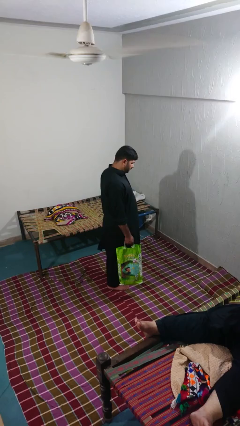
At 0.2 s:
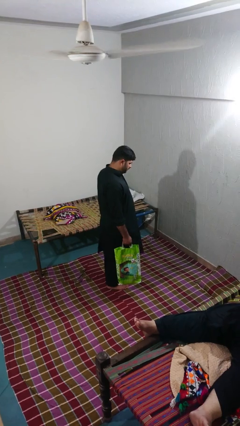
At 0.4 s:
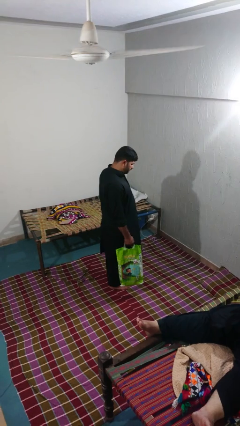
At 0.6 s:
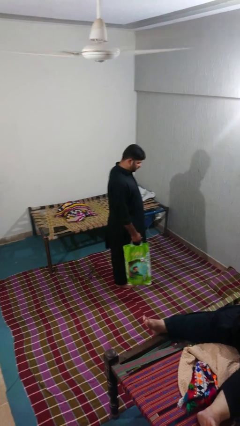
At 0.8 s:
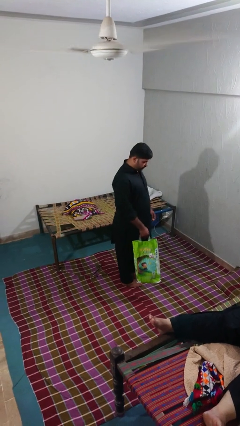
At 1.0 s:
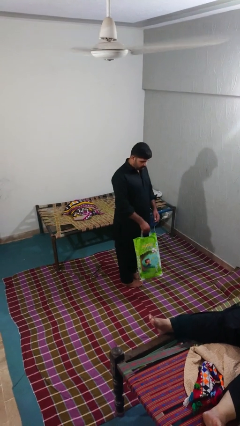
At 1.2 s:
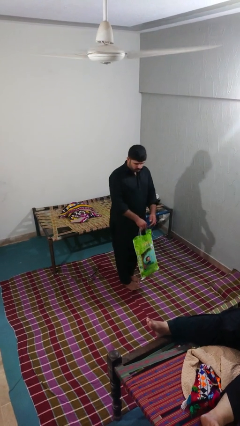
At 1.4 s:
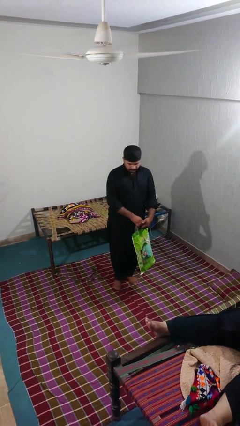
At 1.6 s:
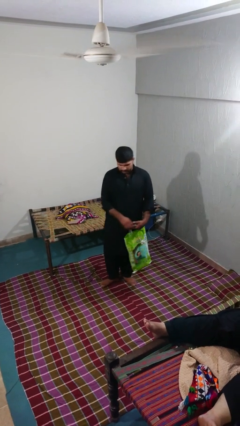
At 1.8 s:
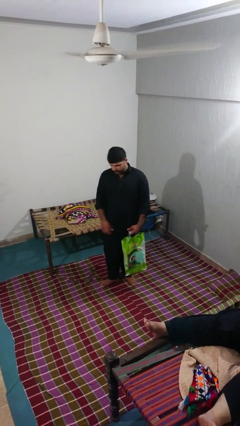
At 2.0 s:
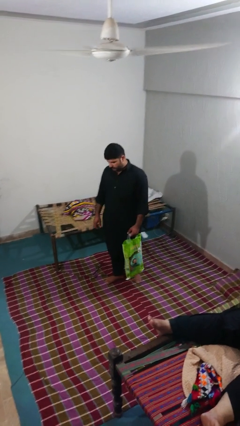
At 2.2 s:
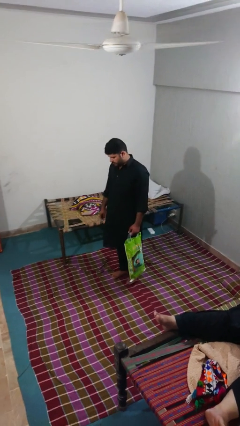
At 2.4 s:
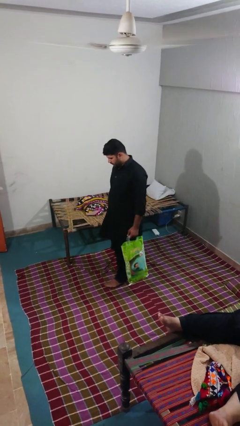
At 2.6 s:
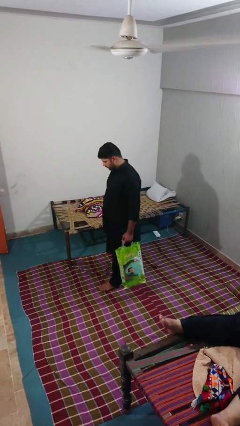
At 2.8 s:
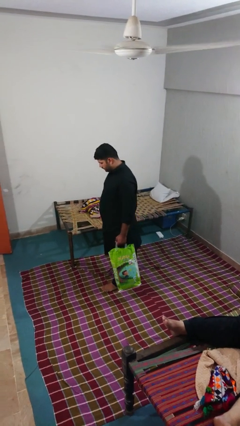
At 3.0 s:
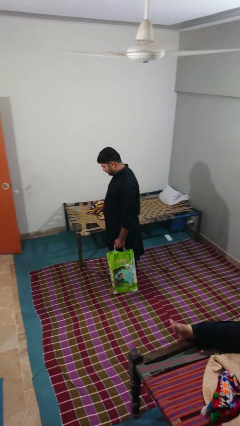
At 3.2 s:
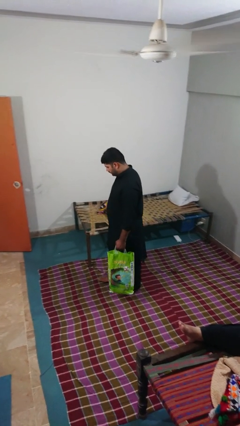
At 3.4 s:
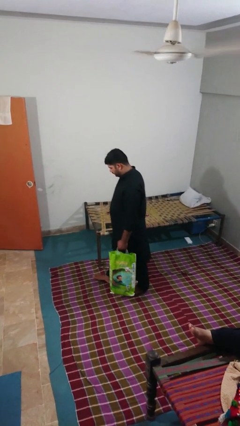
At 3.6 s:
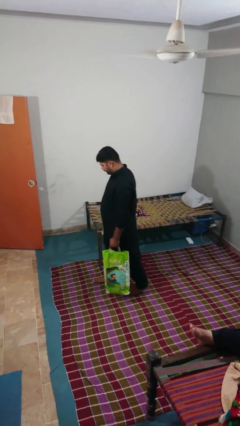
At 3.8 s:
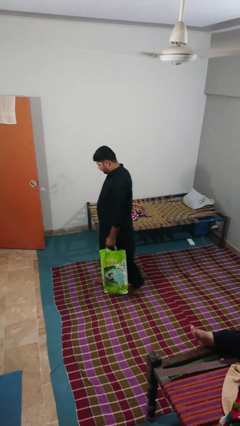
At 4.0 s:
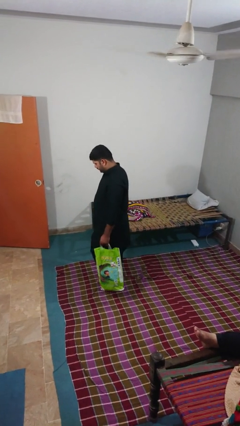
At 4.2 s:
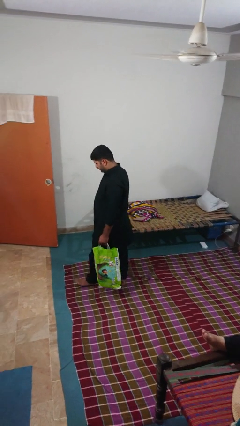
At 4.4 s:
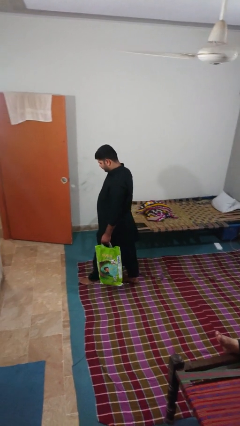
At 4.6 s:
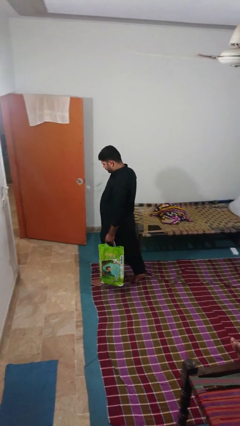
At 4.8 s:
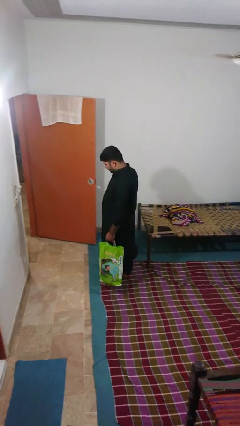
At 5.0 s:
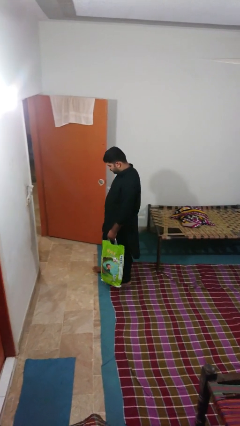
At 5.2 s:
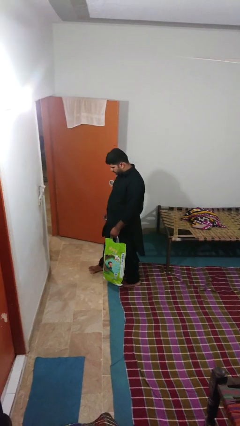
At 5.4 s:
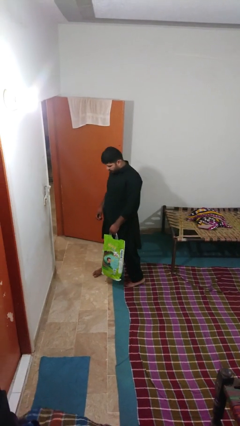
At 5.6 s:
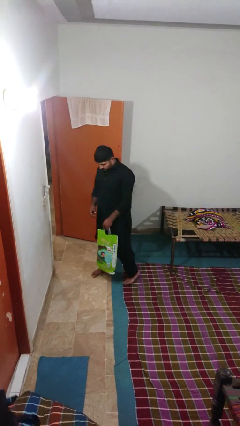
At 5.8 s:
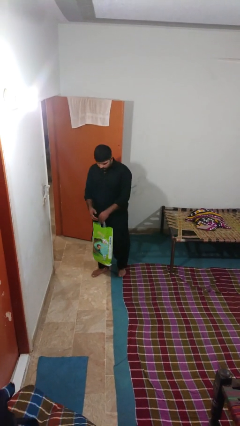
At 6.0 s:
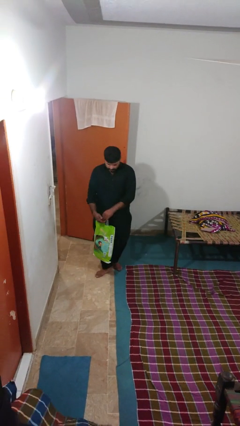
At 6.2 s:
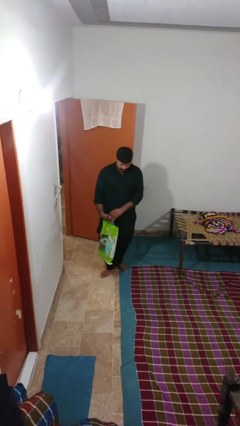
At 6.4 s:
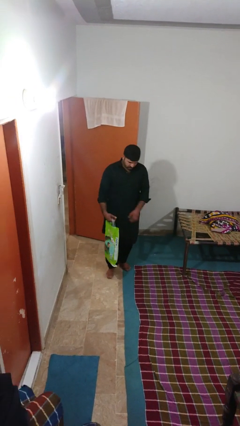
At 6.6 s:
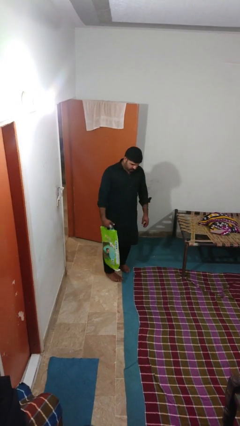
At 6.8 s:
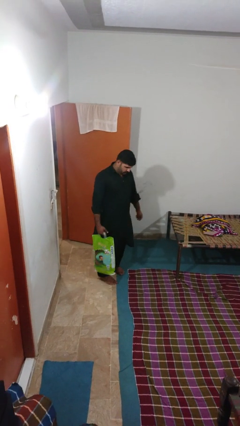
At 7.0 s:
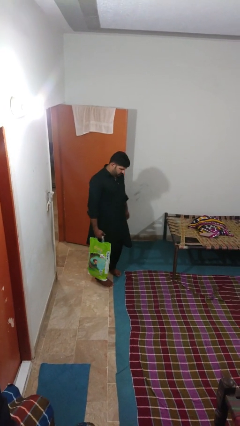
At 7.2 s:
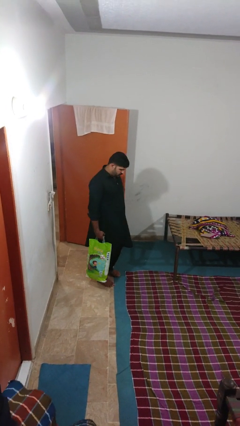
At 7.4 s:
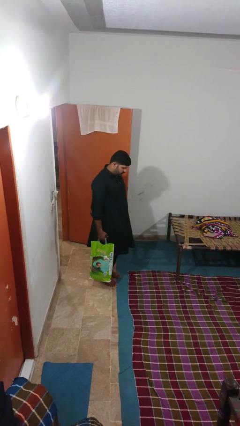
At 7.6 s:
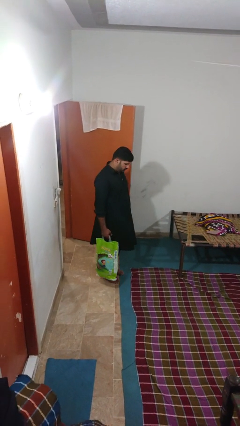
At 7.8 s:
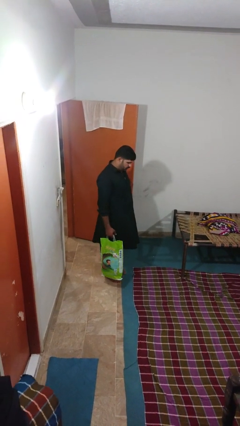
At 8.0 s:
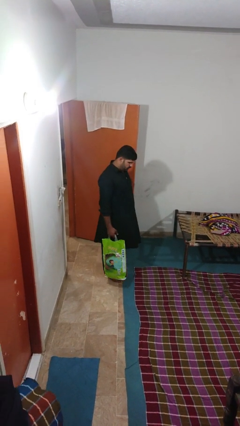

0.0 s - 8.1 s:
person carries groceries

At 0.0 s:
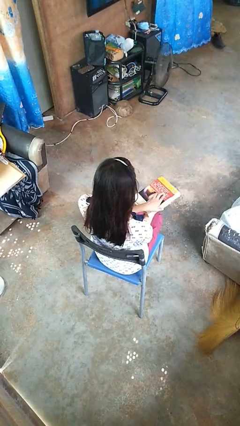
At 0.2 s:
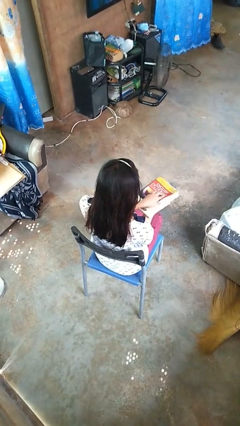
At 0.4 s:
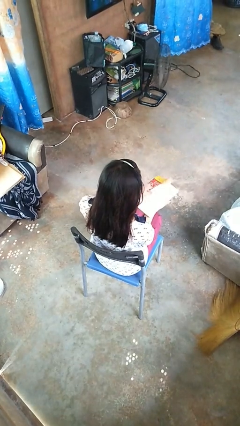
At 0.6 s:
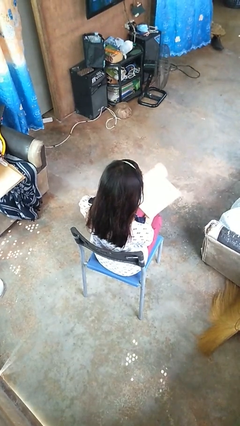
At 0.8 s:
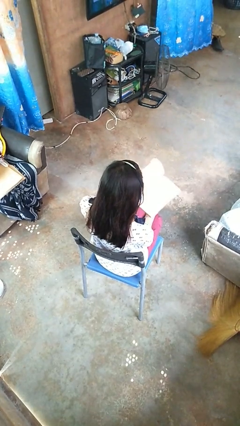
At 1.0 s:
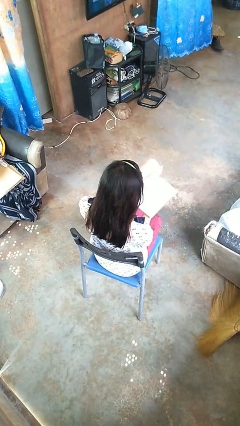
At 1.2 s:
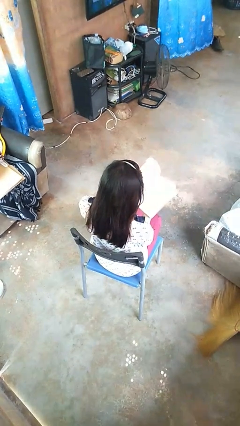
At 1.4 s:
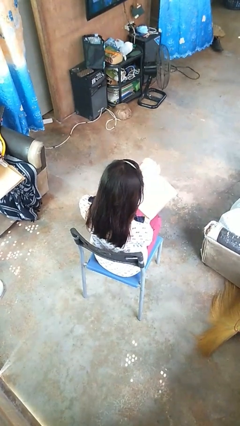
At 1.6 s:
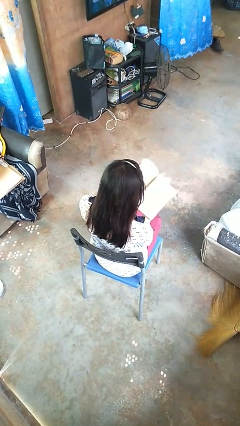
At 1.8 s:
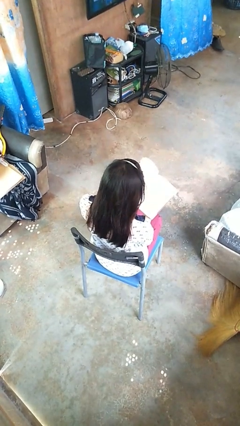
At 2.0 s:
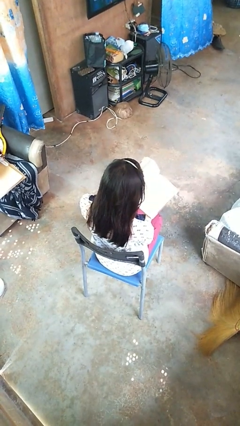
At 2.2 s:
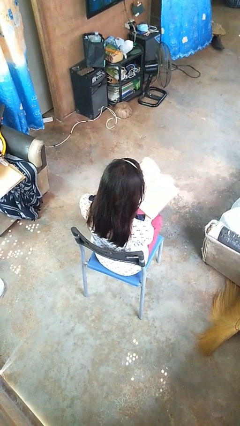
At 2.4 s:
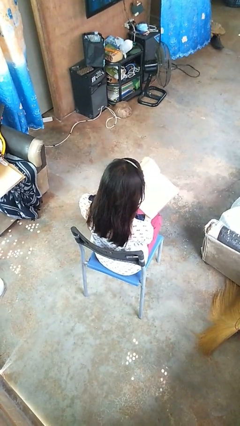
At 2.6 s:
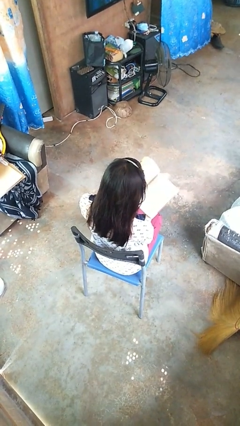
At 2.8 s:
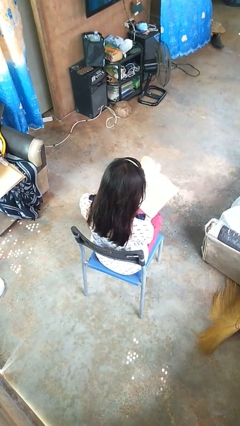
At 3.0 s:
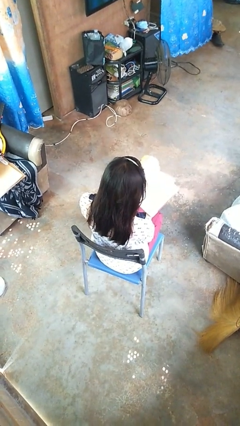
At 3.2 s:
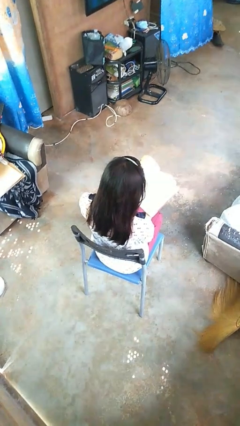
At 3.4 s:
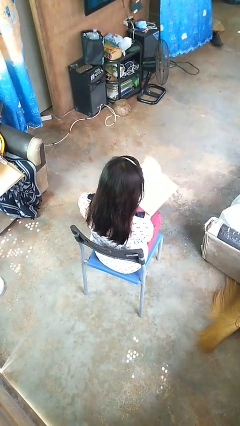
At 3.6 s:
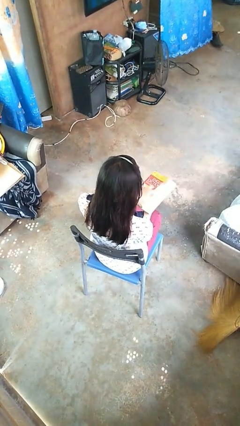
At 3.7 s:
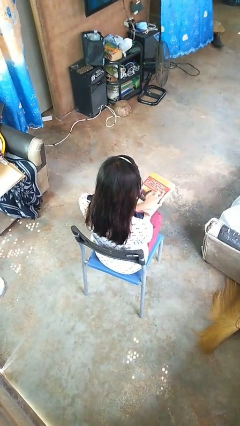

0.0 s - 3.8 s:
person reads book

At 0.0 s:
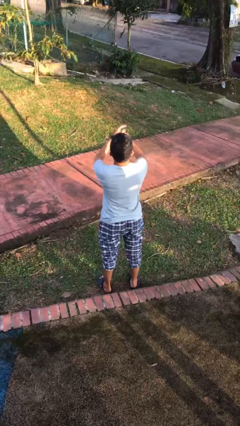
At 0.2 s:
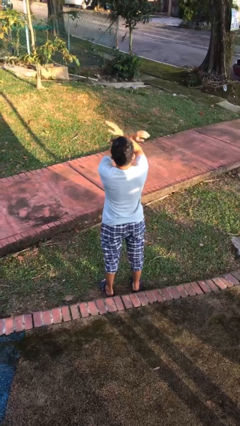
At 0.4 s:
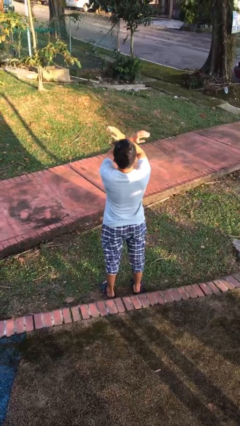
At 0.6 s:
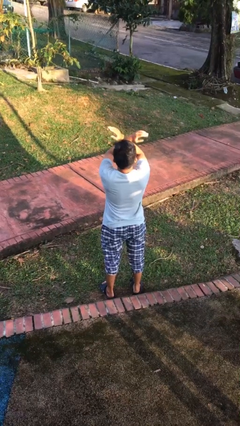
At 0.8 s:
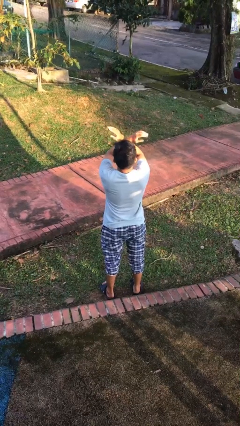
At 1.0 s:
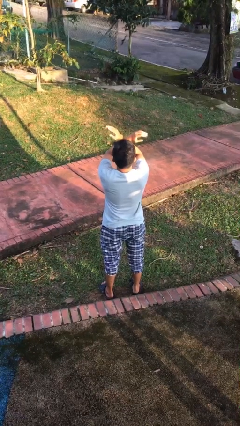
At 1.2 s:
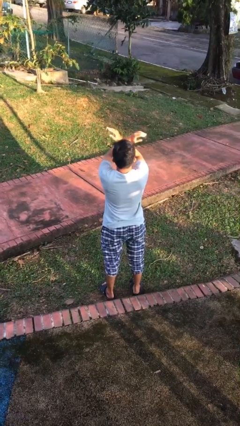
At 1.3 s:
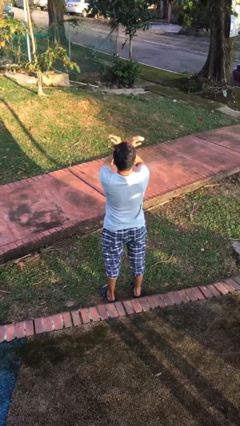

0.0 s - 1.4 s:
person gestures arms x

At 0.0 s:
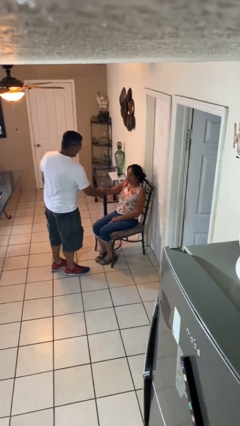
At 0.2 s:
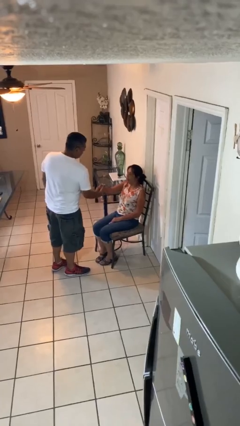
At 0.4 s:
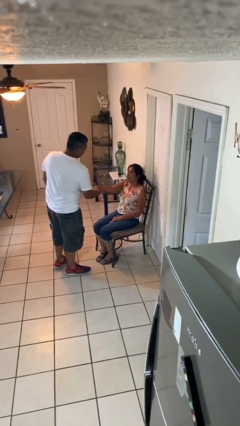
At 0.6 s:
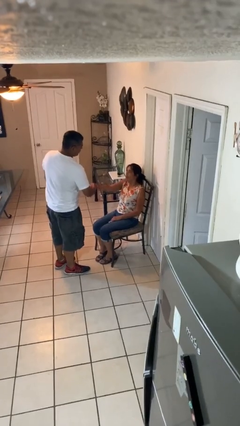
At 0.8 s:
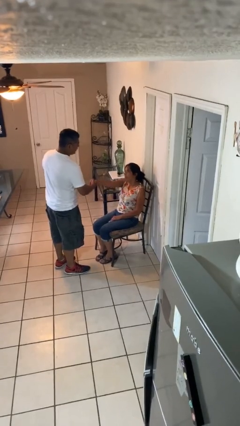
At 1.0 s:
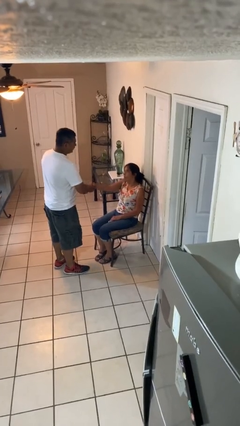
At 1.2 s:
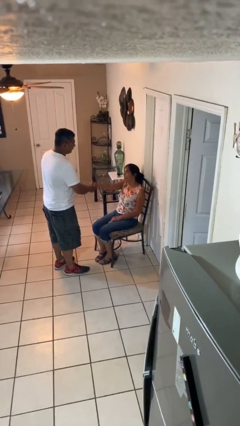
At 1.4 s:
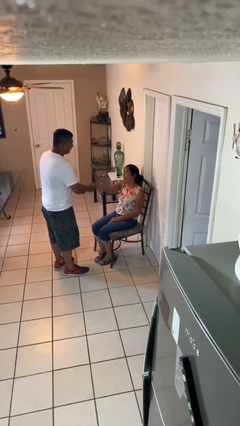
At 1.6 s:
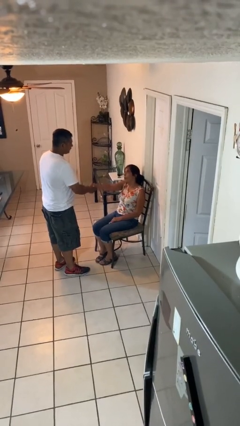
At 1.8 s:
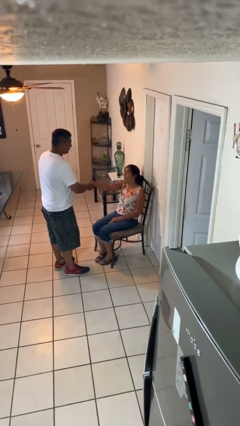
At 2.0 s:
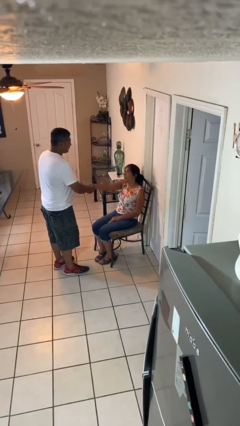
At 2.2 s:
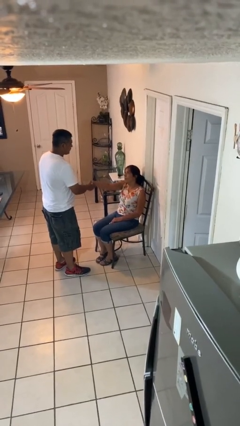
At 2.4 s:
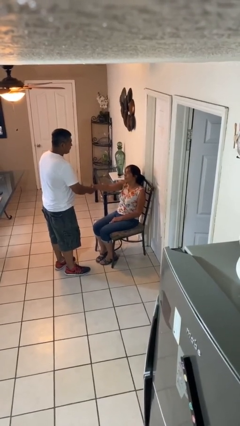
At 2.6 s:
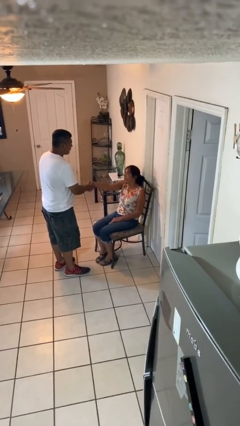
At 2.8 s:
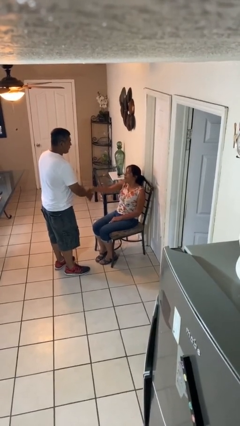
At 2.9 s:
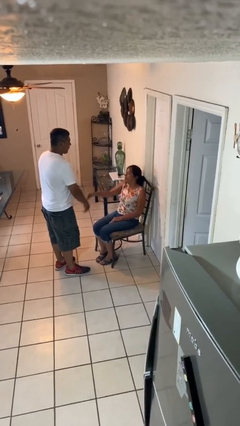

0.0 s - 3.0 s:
person shakes hand

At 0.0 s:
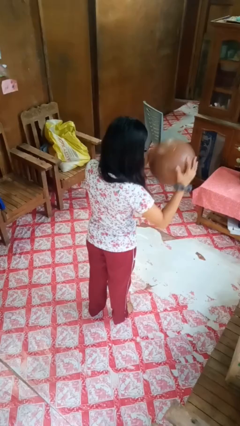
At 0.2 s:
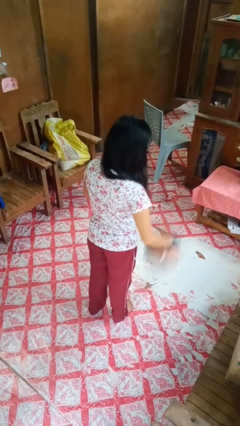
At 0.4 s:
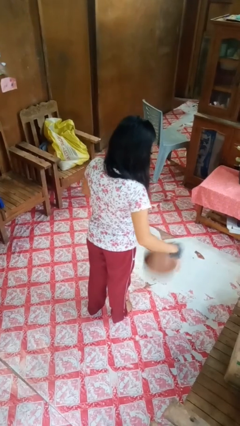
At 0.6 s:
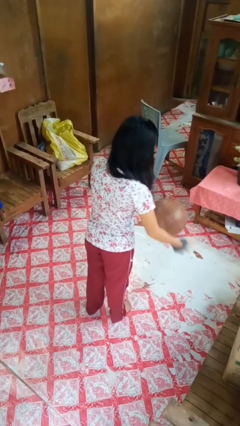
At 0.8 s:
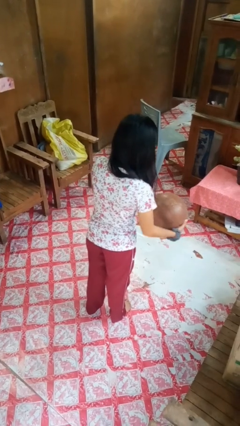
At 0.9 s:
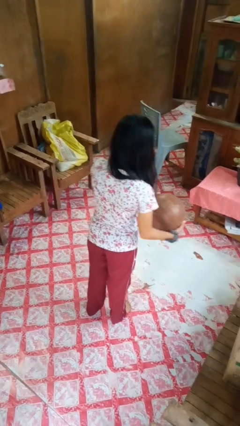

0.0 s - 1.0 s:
person bounces ball on floor

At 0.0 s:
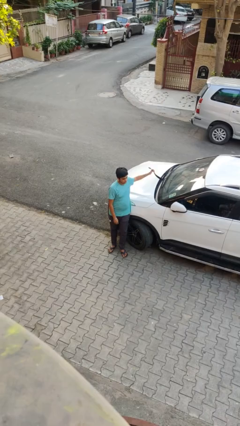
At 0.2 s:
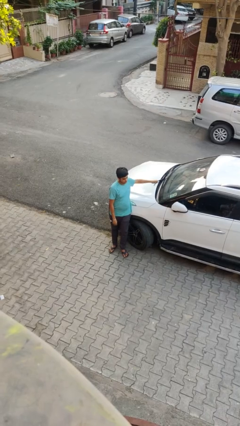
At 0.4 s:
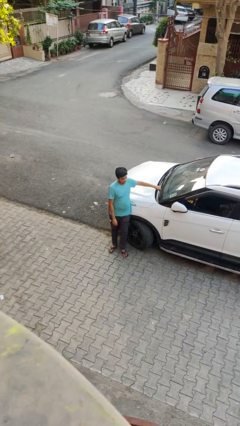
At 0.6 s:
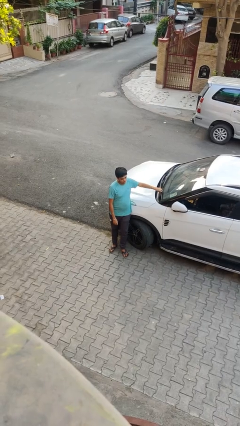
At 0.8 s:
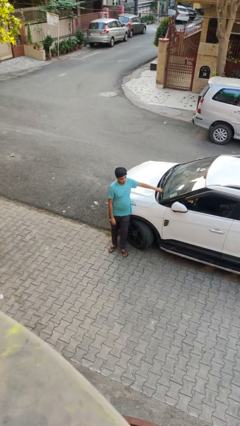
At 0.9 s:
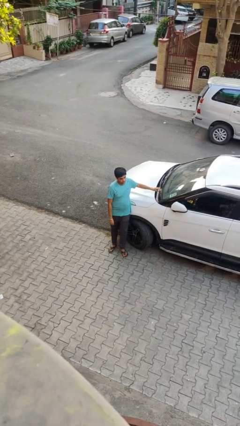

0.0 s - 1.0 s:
person flips down car wipers
